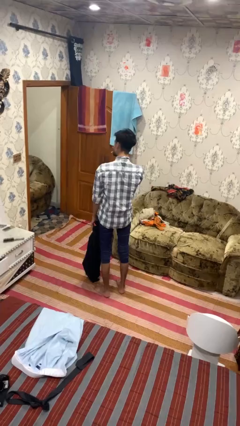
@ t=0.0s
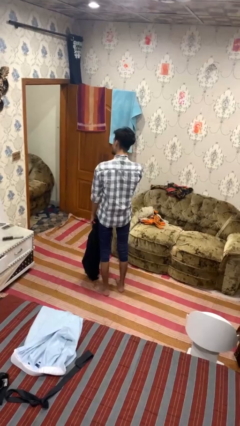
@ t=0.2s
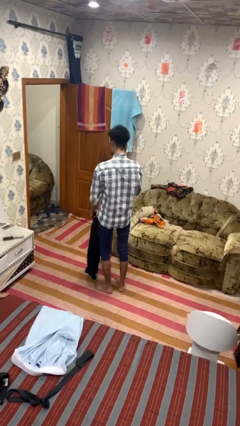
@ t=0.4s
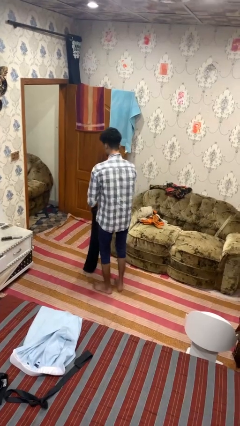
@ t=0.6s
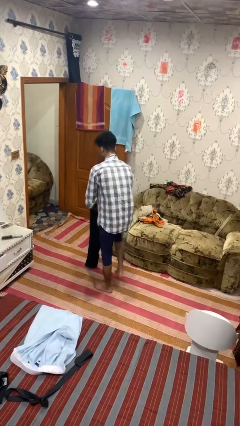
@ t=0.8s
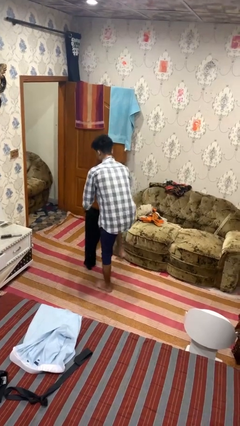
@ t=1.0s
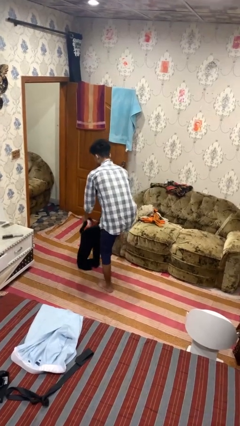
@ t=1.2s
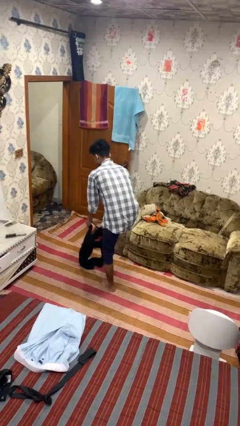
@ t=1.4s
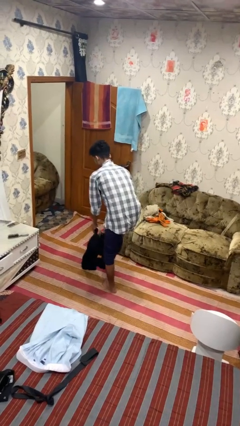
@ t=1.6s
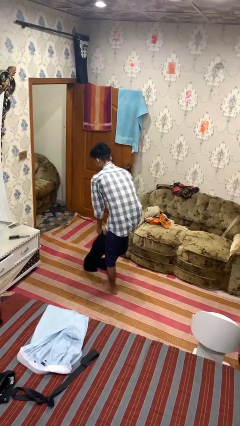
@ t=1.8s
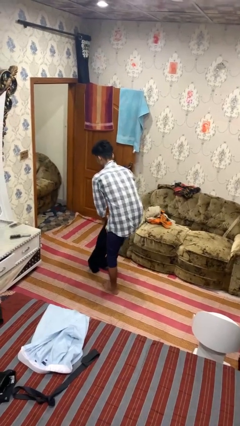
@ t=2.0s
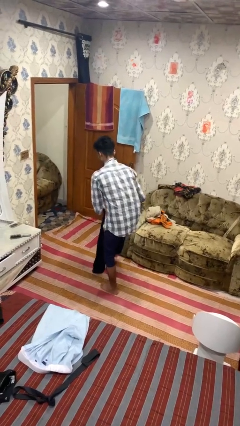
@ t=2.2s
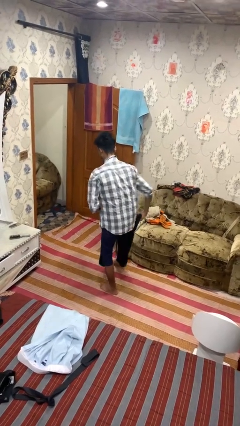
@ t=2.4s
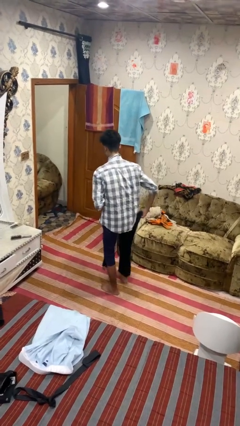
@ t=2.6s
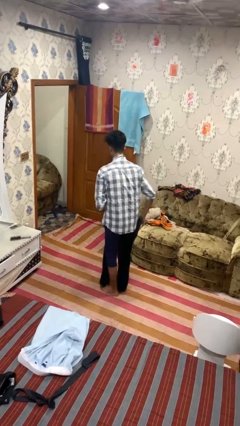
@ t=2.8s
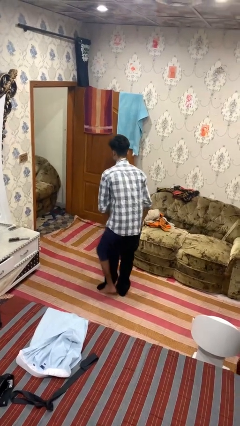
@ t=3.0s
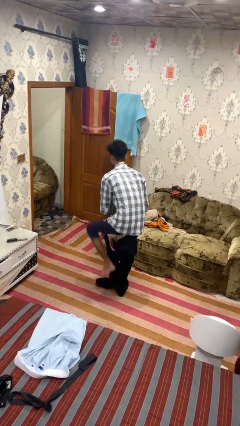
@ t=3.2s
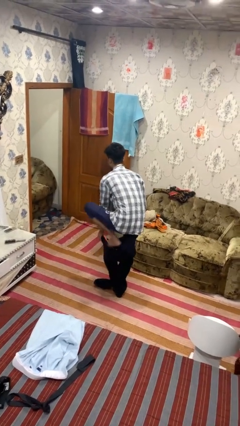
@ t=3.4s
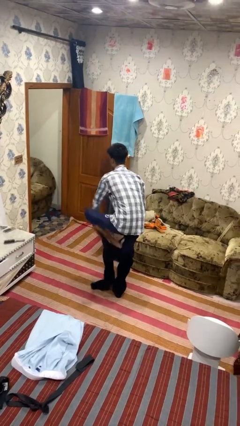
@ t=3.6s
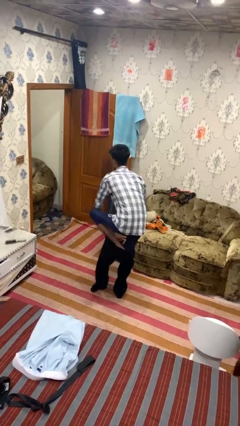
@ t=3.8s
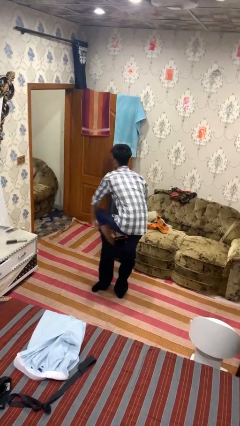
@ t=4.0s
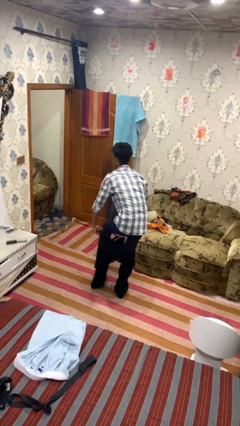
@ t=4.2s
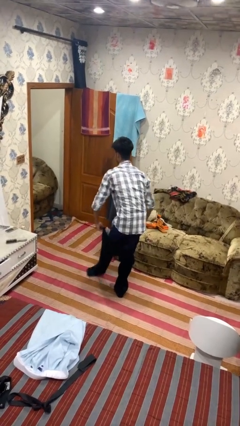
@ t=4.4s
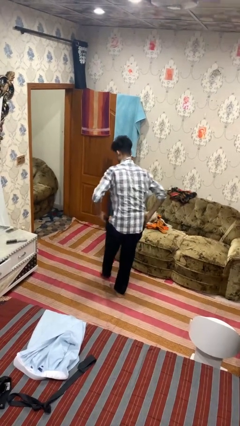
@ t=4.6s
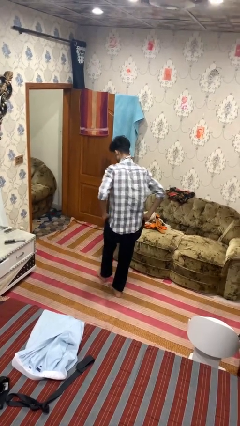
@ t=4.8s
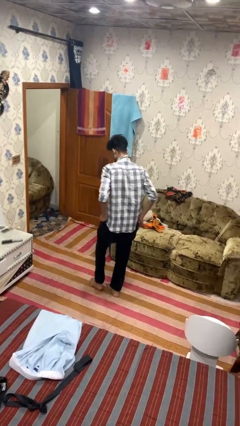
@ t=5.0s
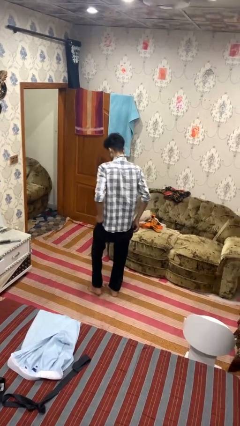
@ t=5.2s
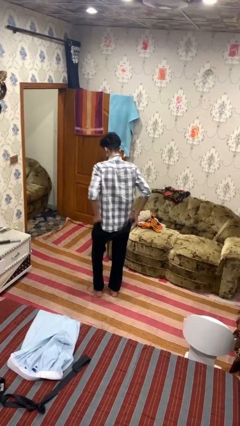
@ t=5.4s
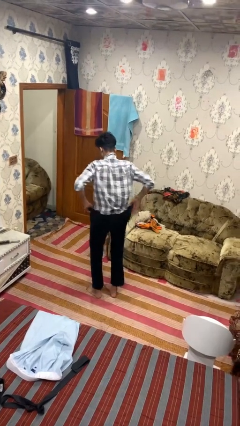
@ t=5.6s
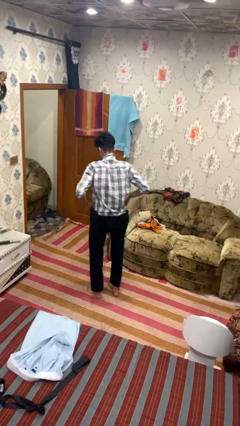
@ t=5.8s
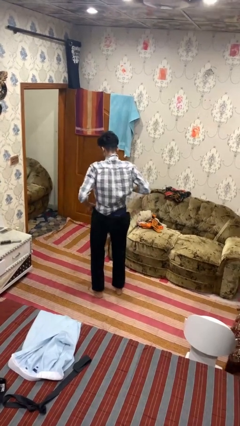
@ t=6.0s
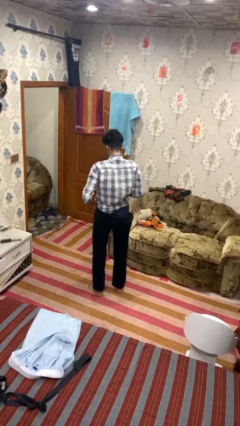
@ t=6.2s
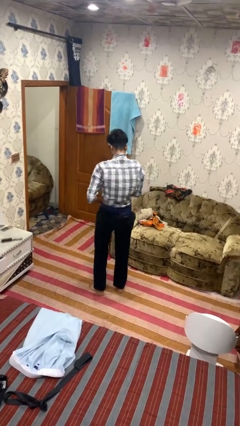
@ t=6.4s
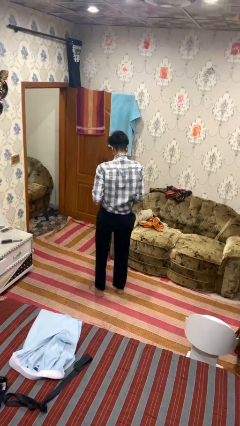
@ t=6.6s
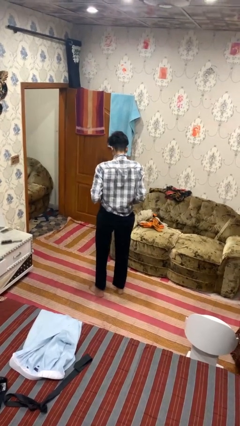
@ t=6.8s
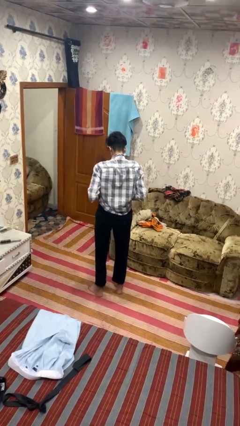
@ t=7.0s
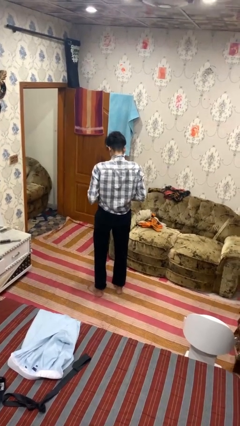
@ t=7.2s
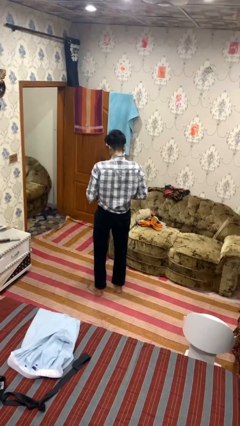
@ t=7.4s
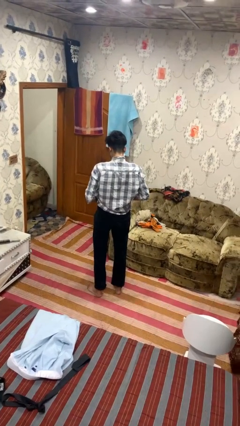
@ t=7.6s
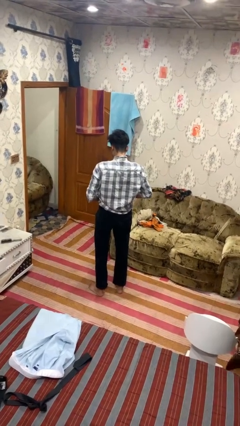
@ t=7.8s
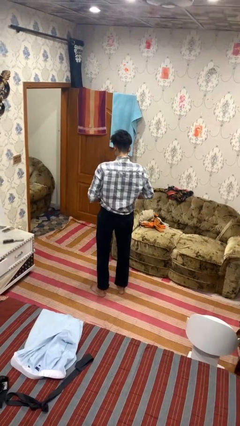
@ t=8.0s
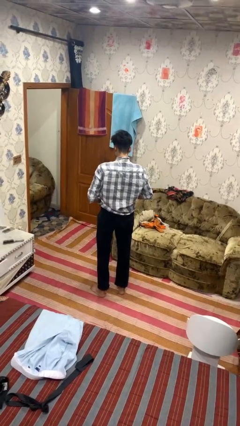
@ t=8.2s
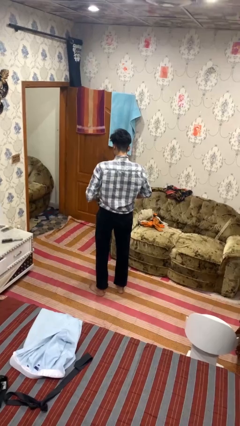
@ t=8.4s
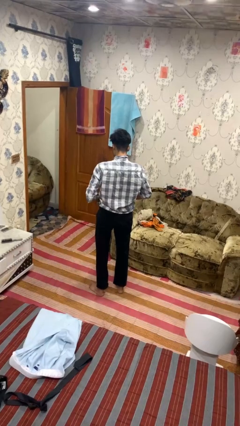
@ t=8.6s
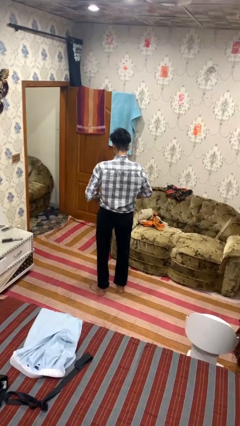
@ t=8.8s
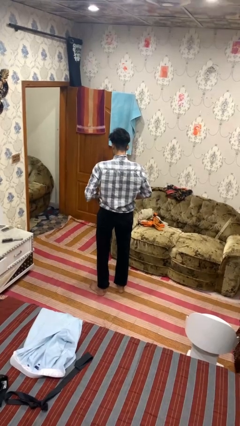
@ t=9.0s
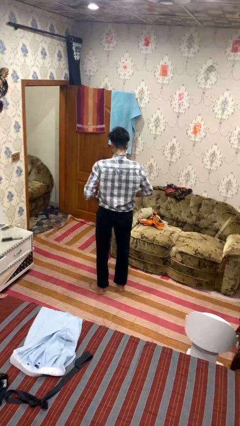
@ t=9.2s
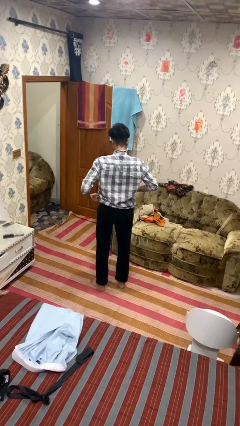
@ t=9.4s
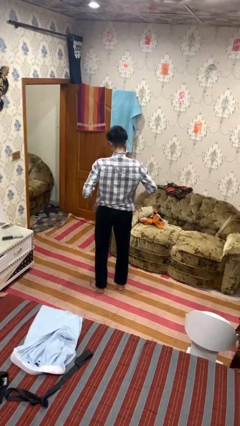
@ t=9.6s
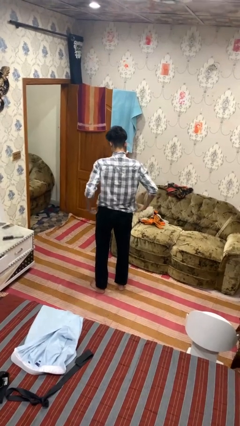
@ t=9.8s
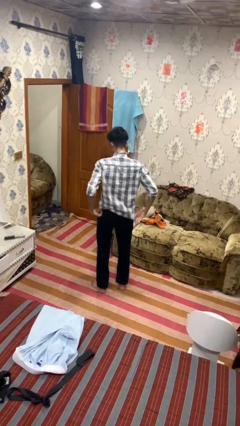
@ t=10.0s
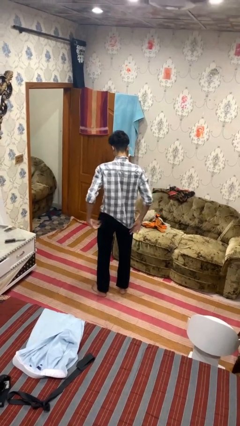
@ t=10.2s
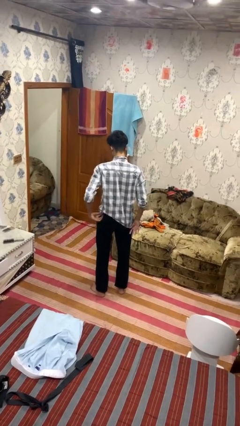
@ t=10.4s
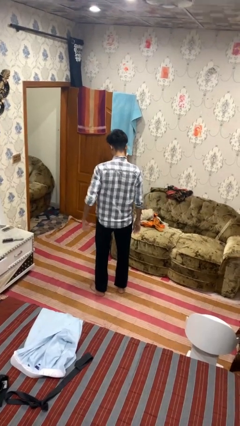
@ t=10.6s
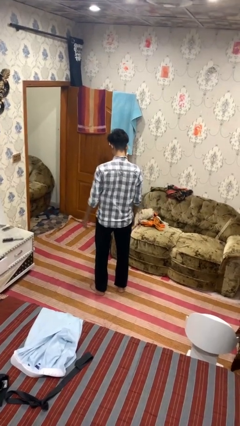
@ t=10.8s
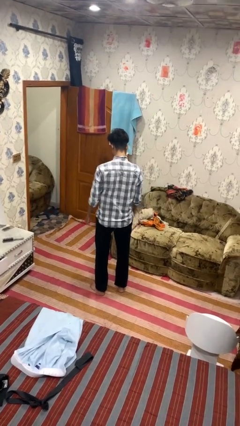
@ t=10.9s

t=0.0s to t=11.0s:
person puts on pants

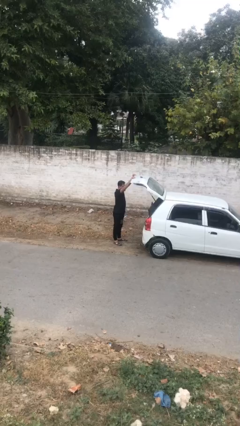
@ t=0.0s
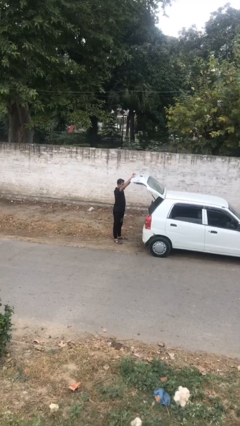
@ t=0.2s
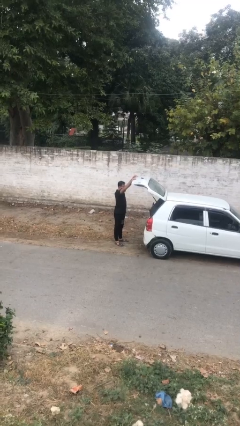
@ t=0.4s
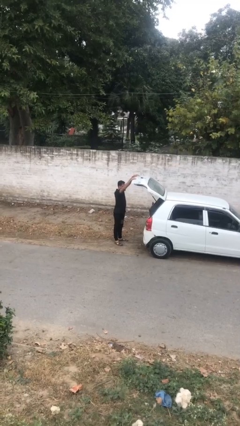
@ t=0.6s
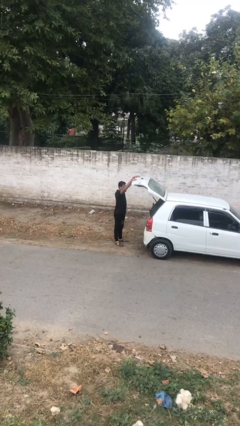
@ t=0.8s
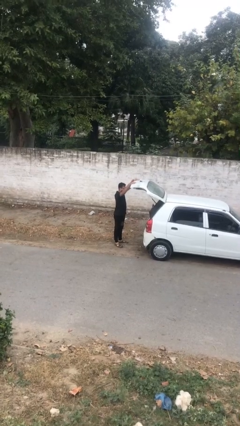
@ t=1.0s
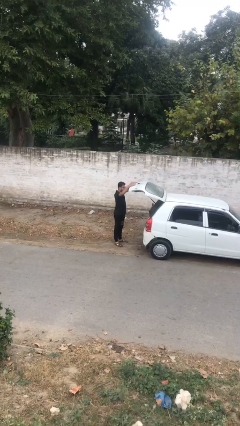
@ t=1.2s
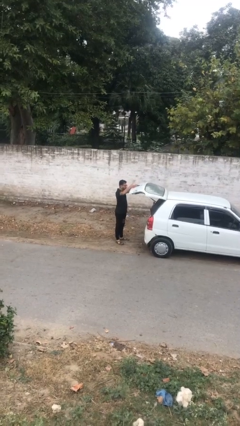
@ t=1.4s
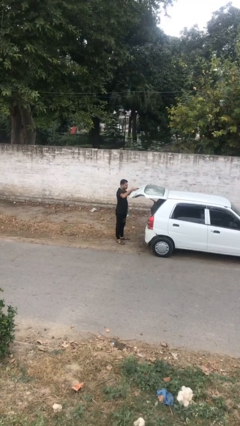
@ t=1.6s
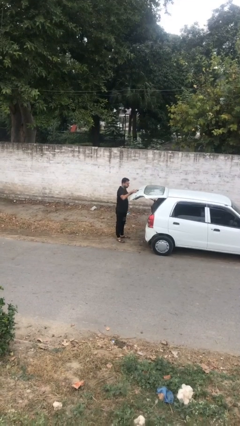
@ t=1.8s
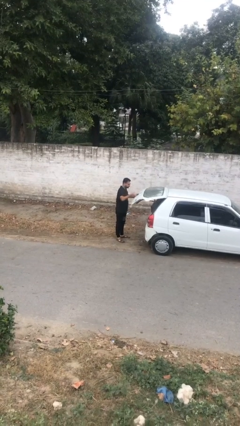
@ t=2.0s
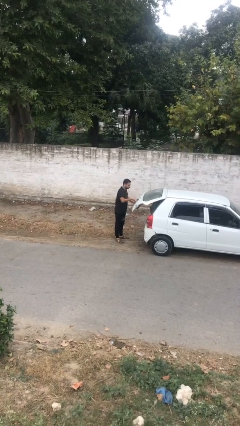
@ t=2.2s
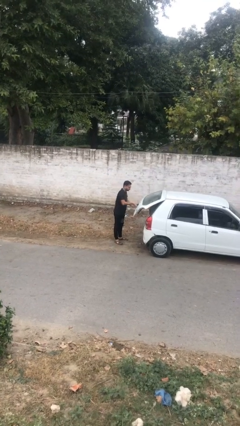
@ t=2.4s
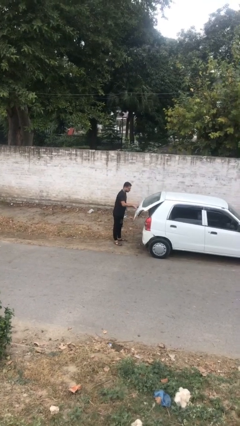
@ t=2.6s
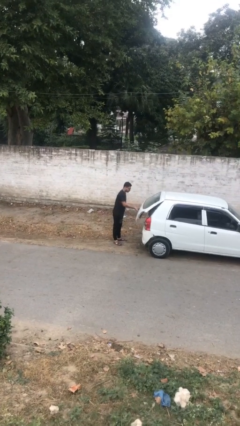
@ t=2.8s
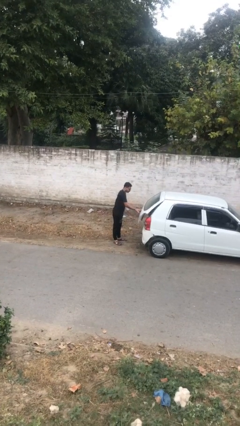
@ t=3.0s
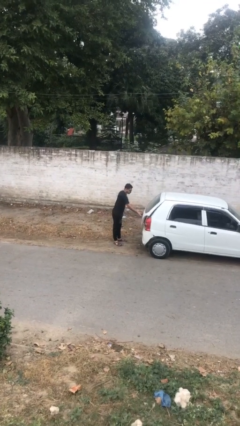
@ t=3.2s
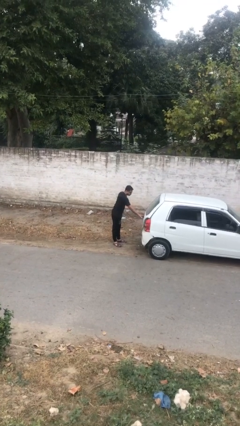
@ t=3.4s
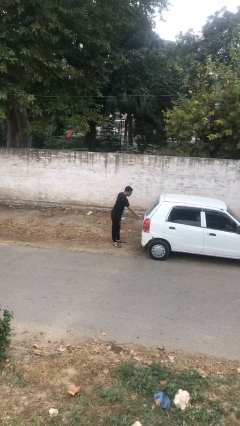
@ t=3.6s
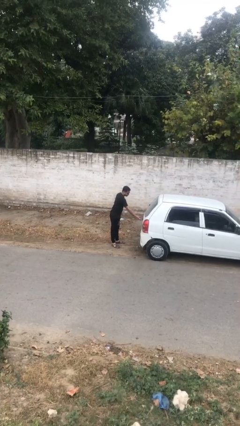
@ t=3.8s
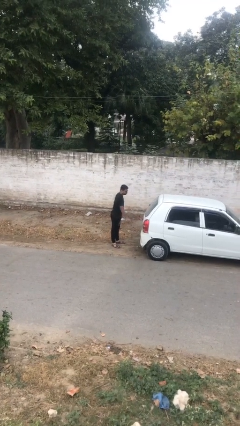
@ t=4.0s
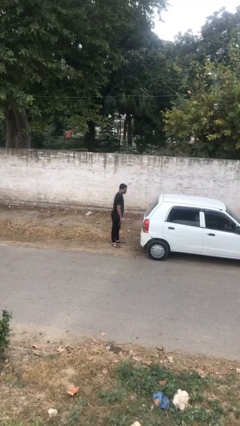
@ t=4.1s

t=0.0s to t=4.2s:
person closes car trunk

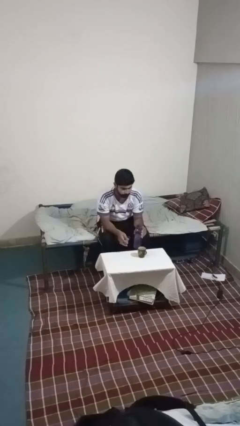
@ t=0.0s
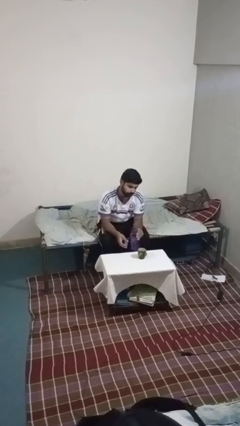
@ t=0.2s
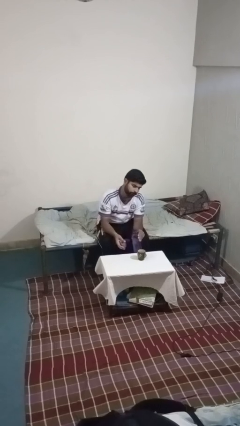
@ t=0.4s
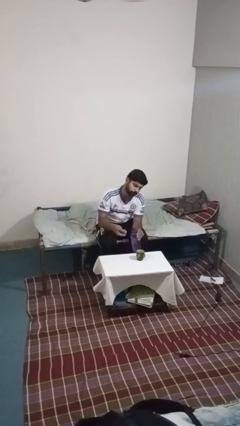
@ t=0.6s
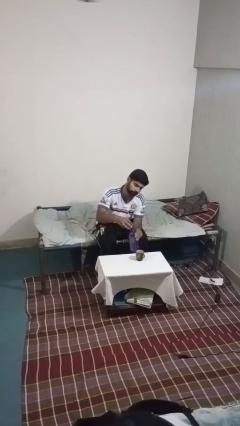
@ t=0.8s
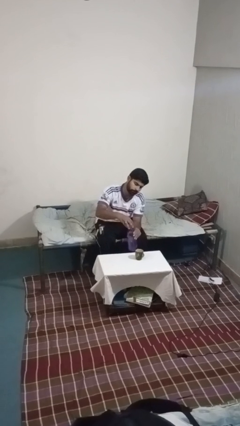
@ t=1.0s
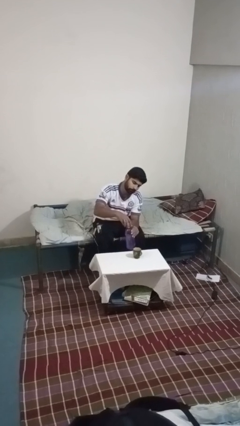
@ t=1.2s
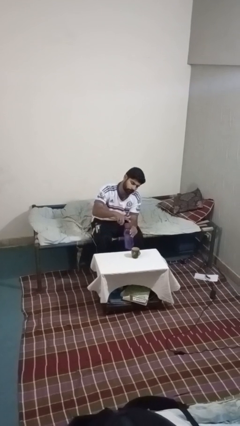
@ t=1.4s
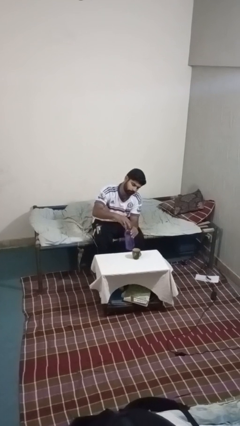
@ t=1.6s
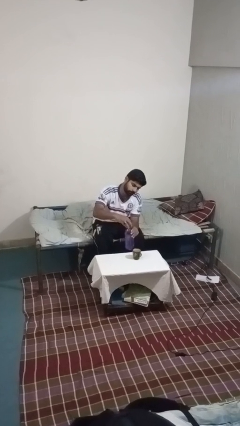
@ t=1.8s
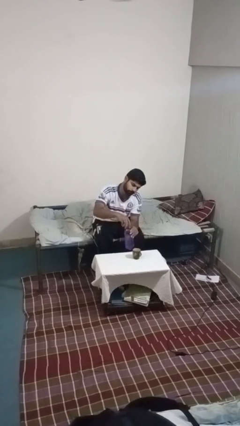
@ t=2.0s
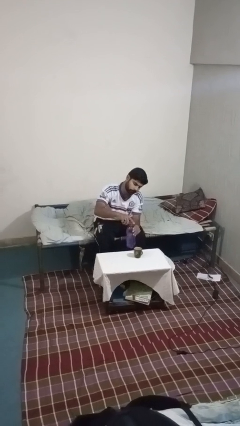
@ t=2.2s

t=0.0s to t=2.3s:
person screws lid to bottle
